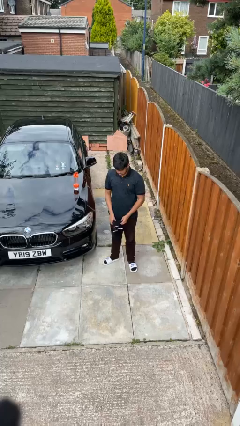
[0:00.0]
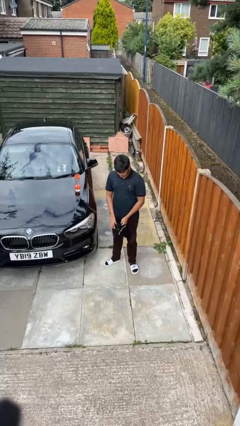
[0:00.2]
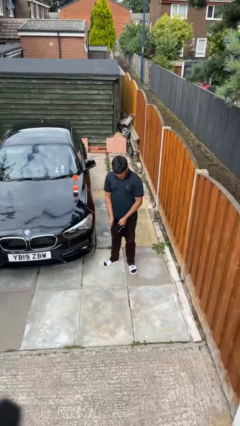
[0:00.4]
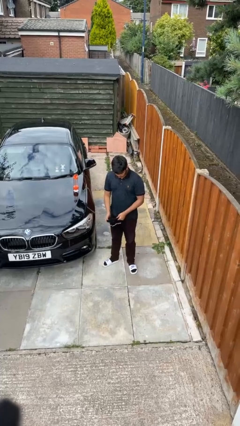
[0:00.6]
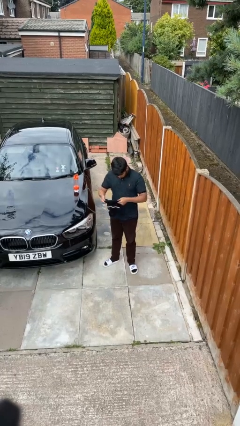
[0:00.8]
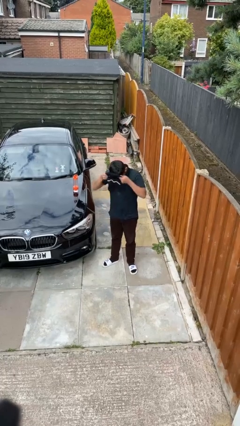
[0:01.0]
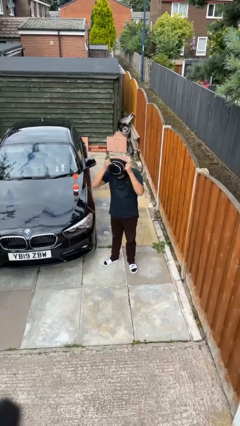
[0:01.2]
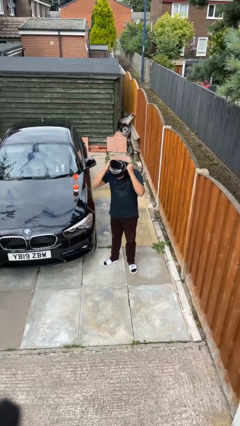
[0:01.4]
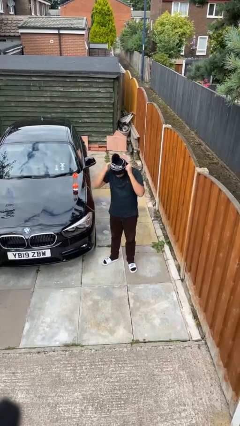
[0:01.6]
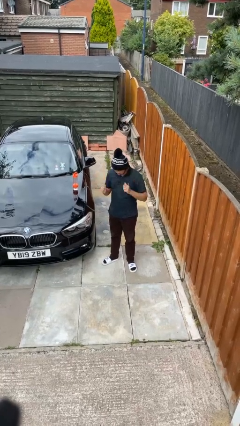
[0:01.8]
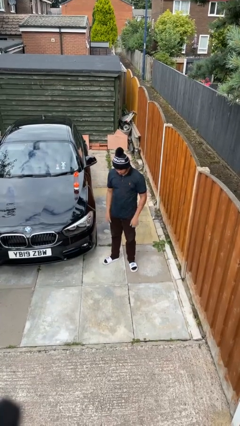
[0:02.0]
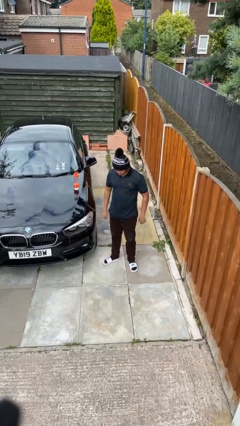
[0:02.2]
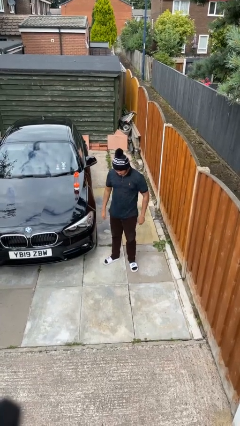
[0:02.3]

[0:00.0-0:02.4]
person puts on hat

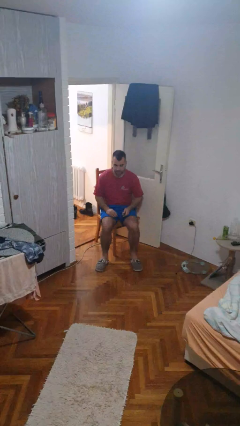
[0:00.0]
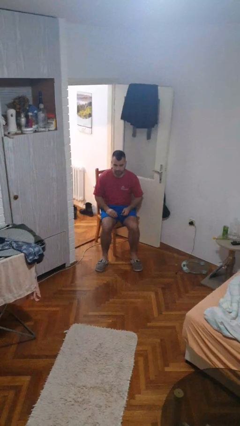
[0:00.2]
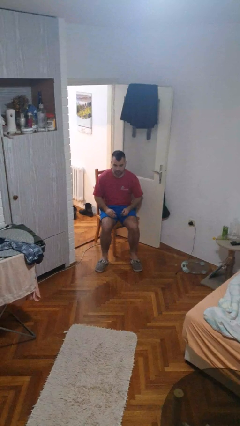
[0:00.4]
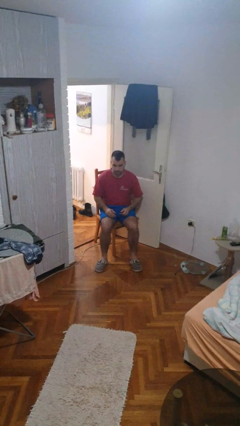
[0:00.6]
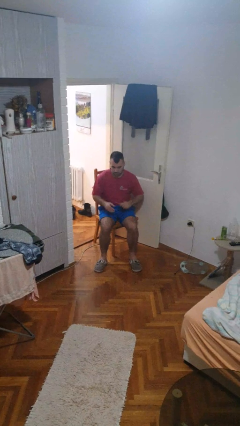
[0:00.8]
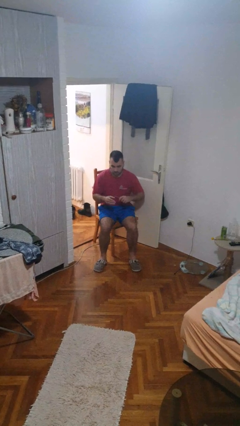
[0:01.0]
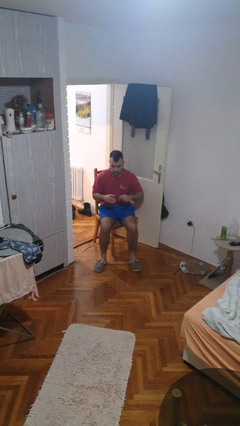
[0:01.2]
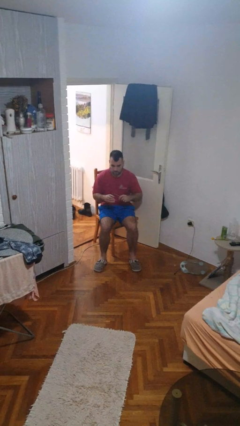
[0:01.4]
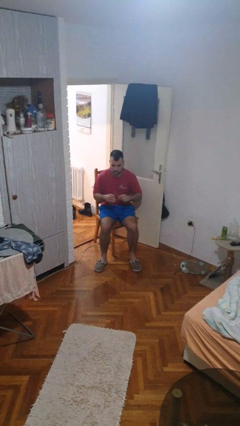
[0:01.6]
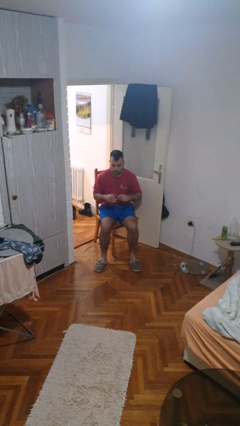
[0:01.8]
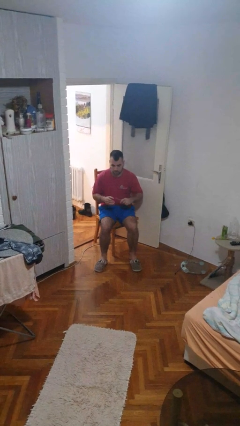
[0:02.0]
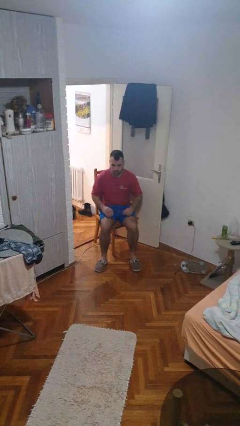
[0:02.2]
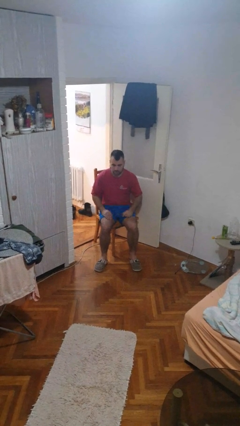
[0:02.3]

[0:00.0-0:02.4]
person files fingernails

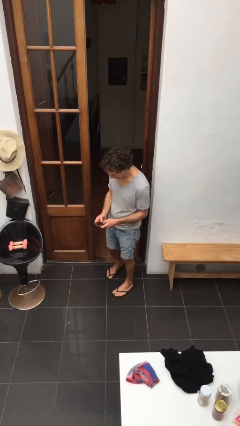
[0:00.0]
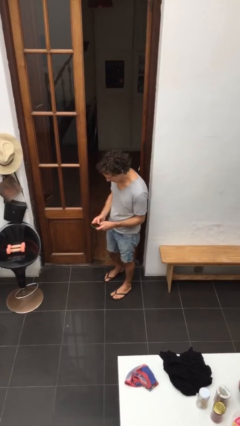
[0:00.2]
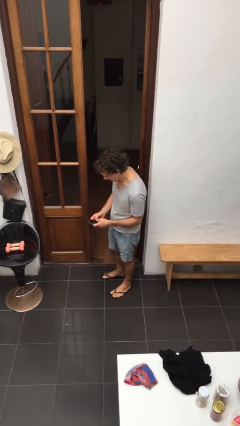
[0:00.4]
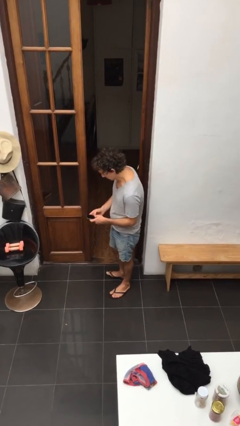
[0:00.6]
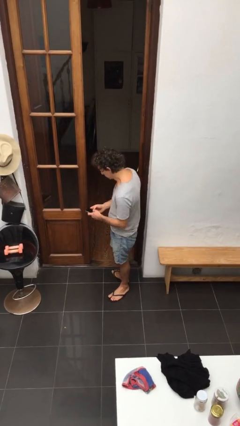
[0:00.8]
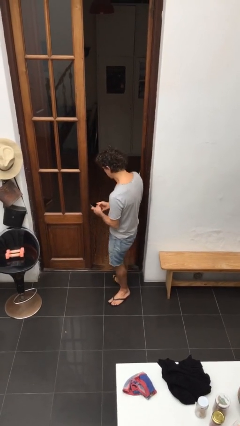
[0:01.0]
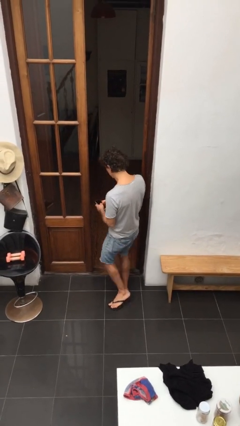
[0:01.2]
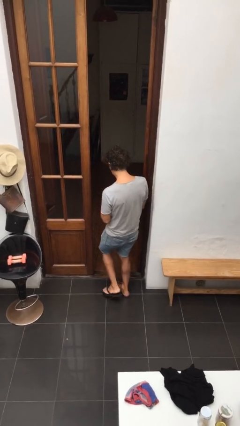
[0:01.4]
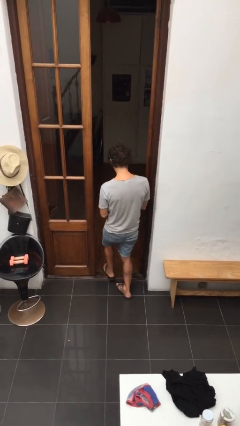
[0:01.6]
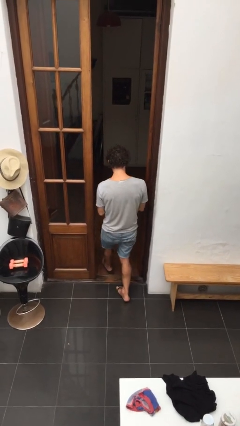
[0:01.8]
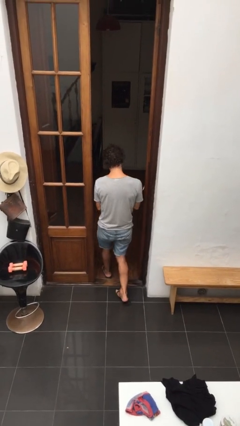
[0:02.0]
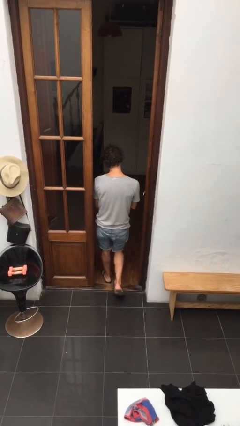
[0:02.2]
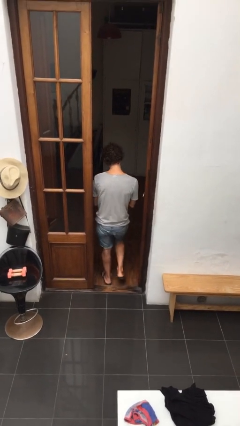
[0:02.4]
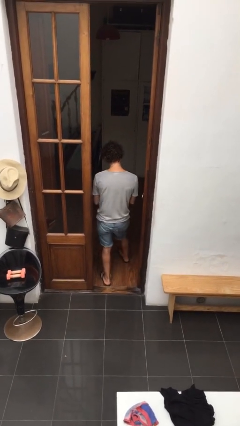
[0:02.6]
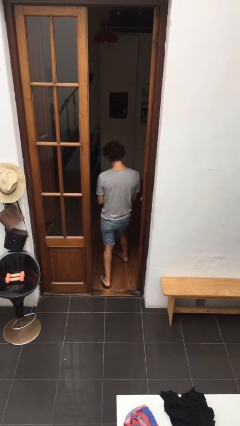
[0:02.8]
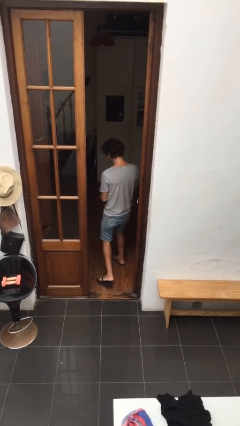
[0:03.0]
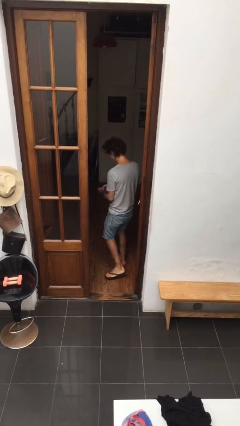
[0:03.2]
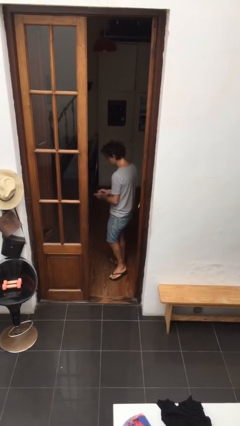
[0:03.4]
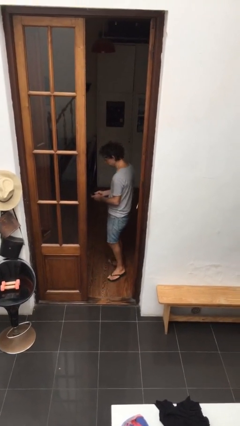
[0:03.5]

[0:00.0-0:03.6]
person exits scene through structure

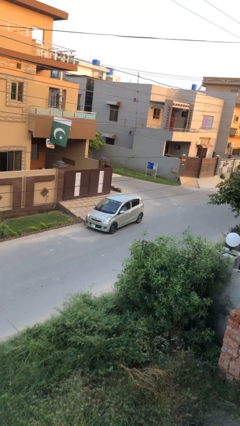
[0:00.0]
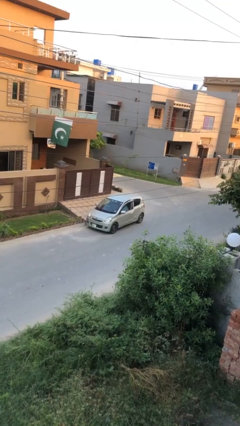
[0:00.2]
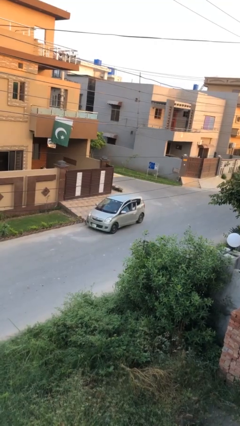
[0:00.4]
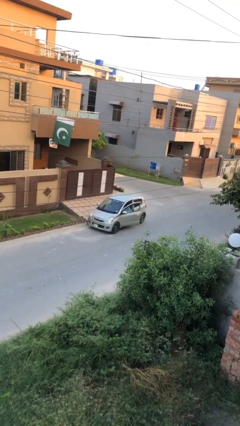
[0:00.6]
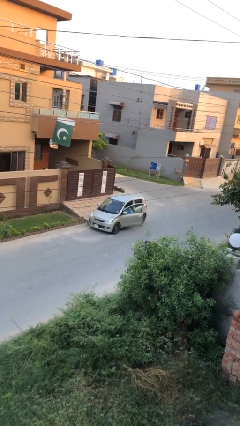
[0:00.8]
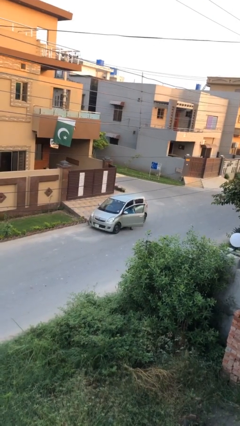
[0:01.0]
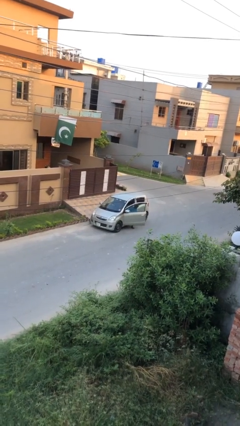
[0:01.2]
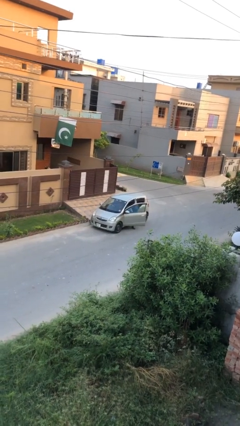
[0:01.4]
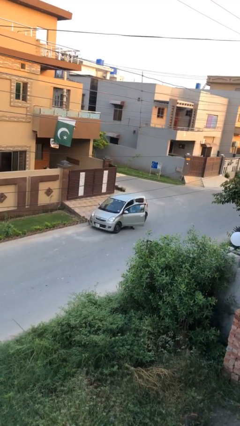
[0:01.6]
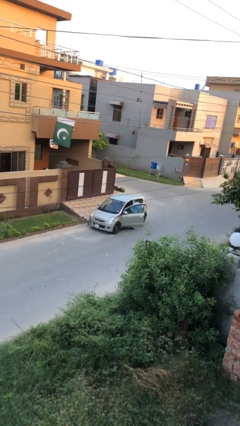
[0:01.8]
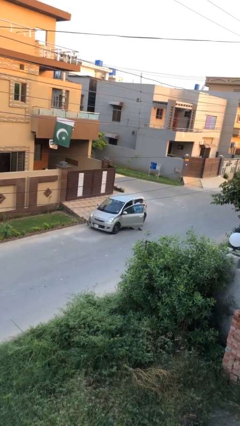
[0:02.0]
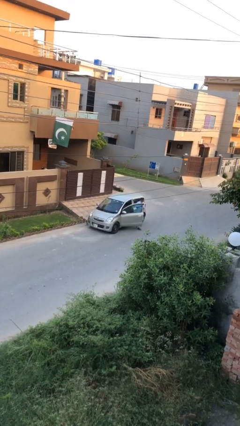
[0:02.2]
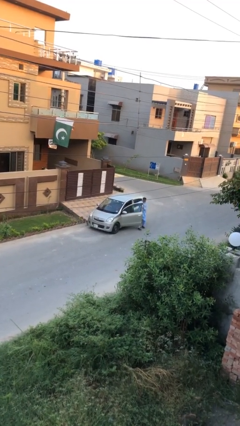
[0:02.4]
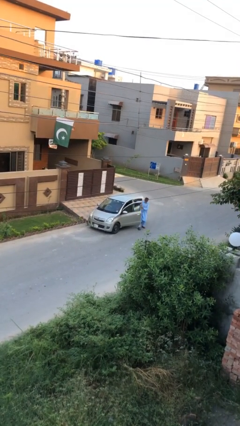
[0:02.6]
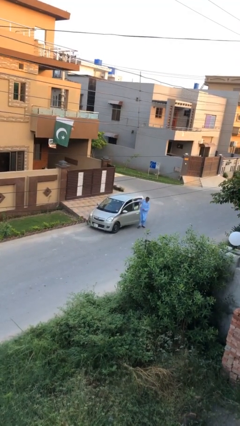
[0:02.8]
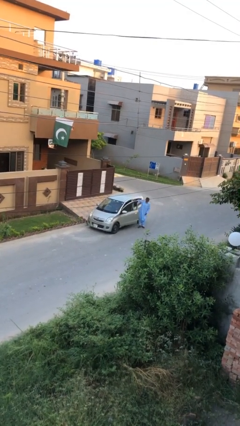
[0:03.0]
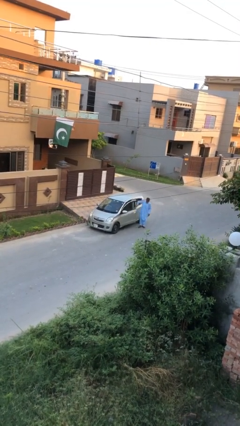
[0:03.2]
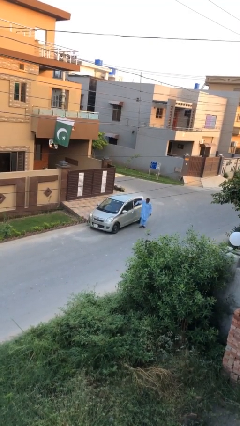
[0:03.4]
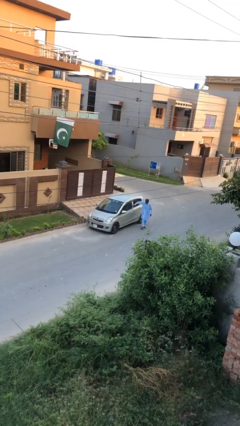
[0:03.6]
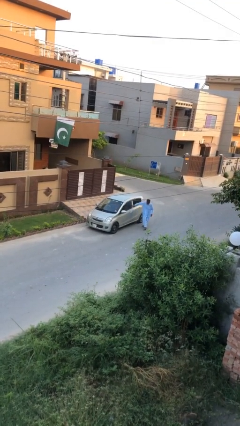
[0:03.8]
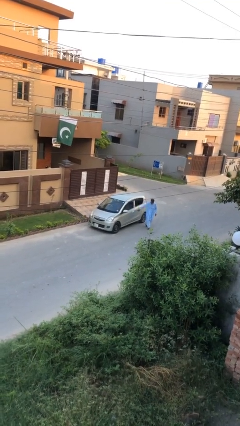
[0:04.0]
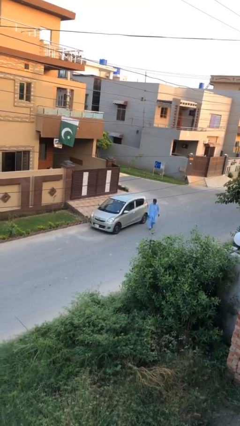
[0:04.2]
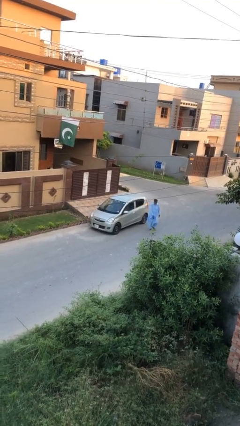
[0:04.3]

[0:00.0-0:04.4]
car drops off person

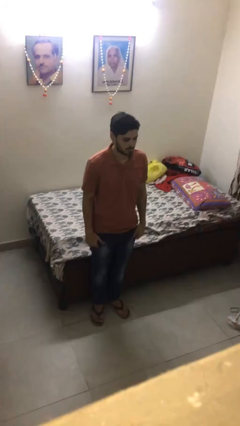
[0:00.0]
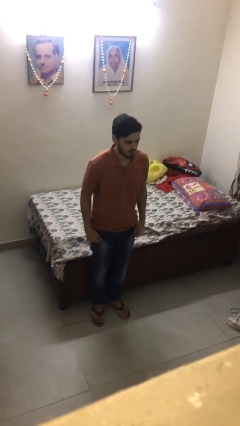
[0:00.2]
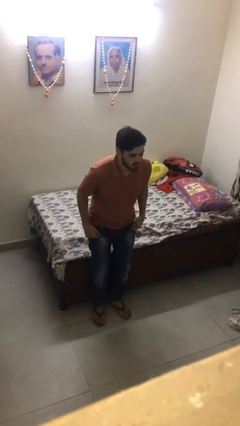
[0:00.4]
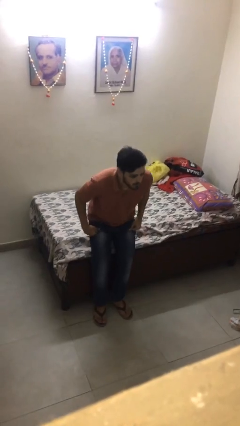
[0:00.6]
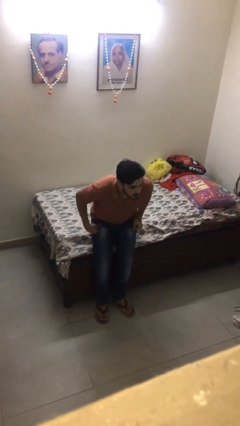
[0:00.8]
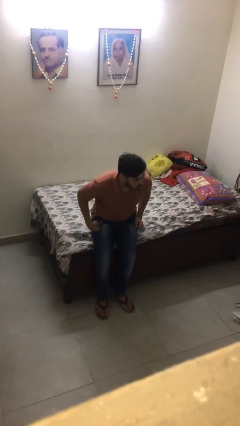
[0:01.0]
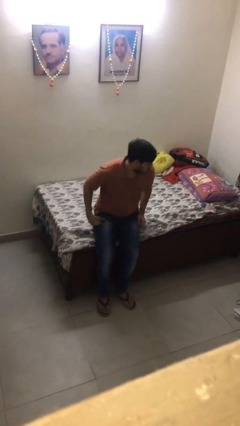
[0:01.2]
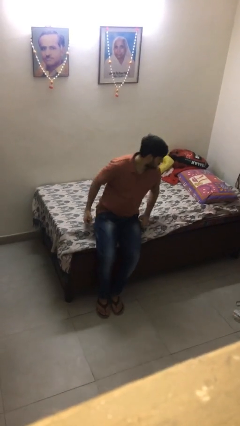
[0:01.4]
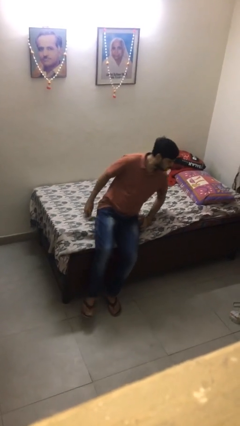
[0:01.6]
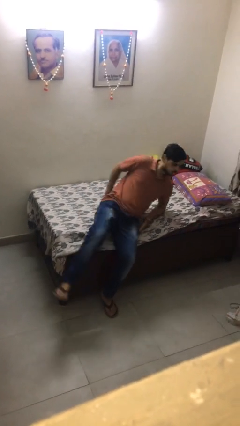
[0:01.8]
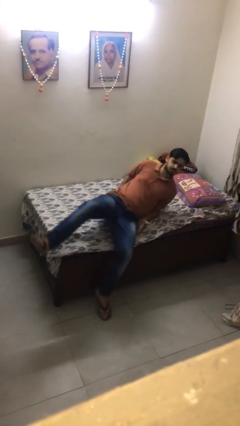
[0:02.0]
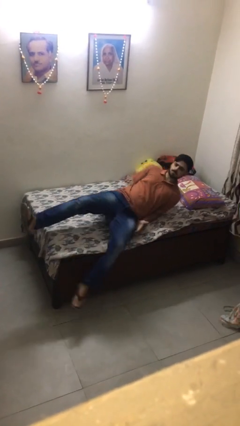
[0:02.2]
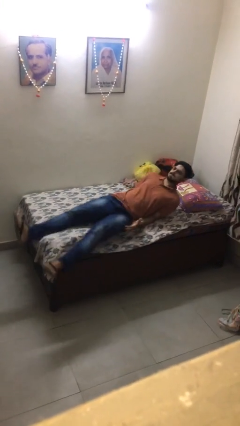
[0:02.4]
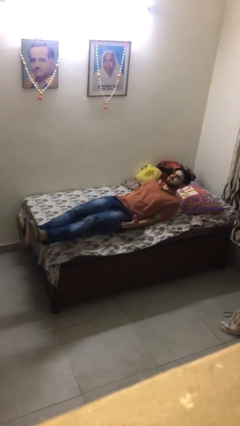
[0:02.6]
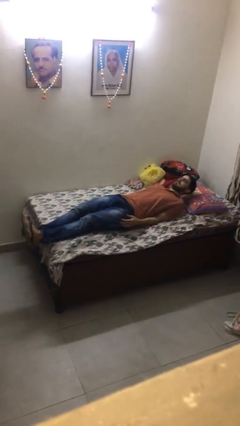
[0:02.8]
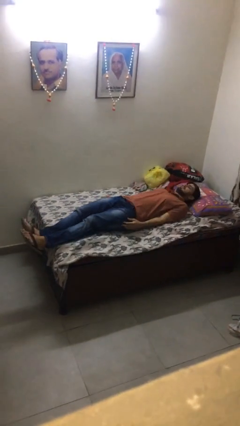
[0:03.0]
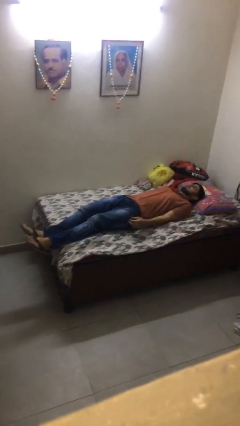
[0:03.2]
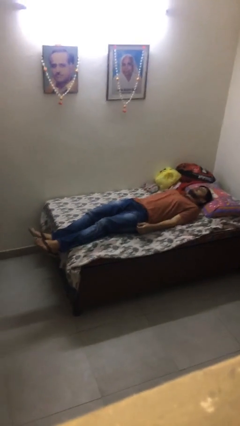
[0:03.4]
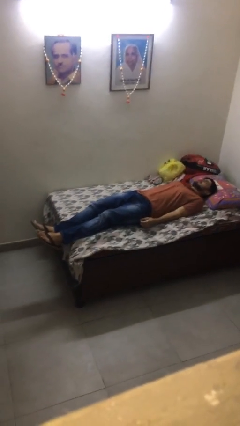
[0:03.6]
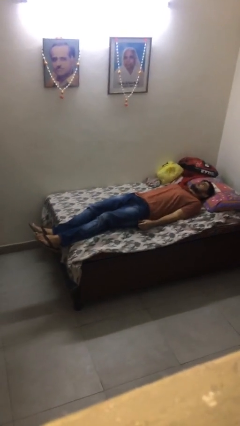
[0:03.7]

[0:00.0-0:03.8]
person lies down on bed

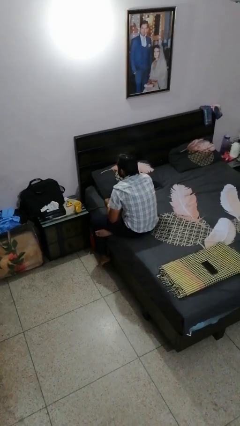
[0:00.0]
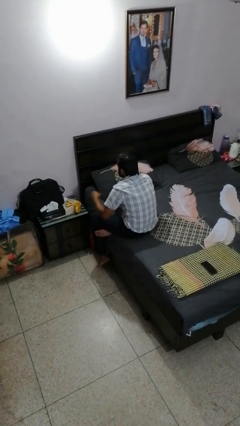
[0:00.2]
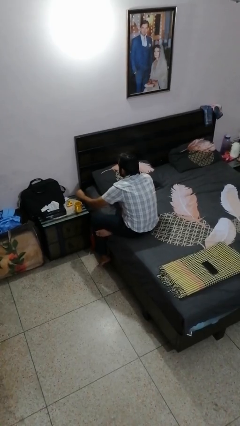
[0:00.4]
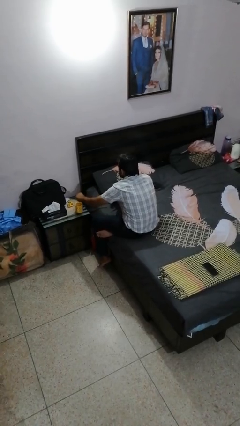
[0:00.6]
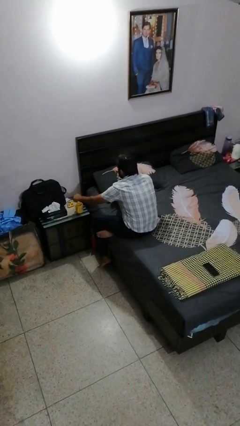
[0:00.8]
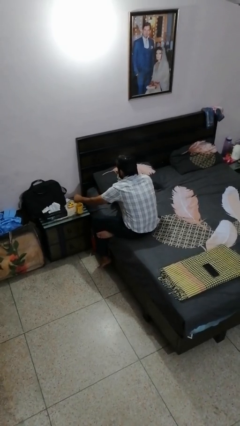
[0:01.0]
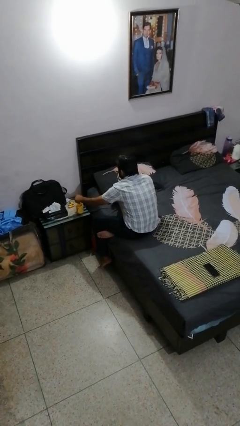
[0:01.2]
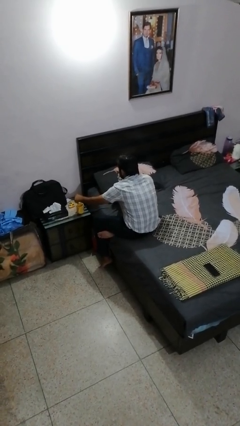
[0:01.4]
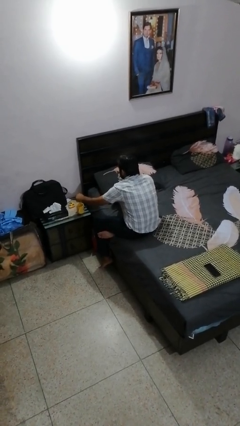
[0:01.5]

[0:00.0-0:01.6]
person stirs mug
